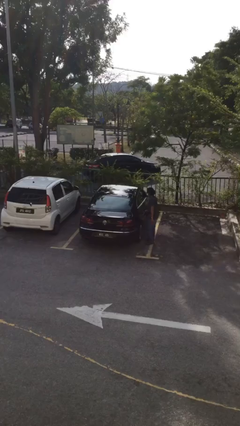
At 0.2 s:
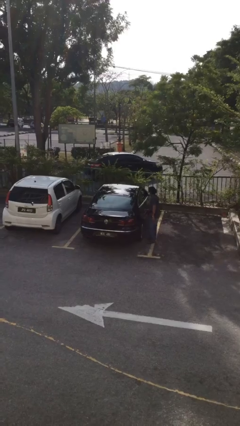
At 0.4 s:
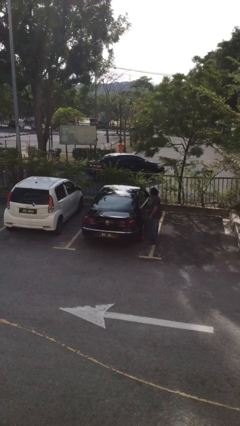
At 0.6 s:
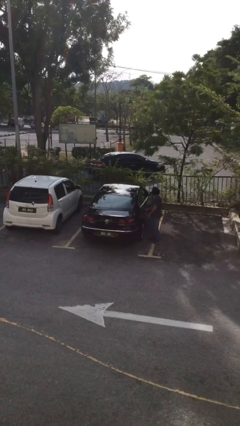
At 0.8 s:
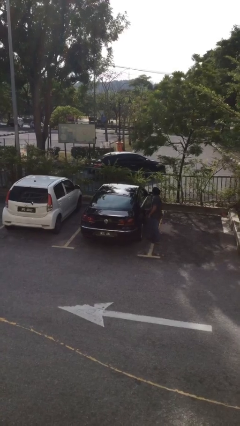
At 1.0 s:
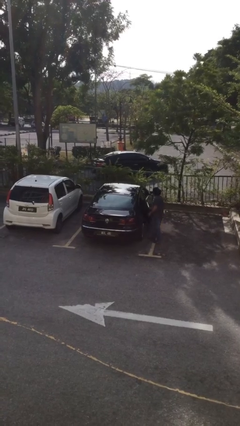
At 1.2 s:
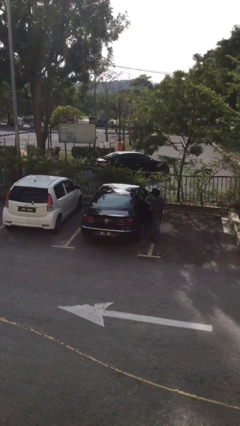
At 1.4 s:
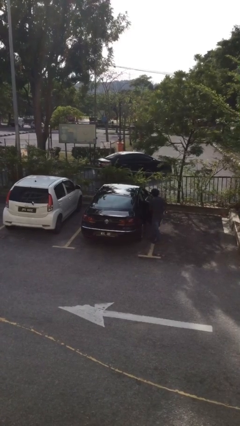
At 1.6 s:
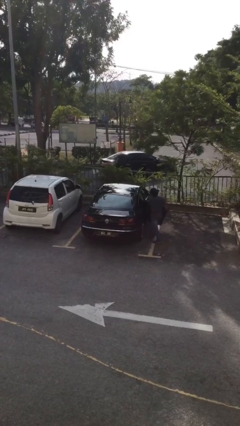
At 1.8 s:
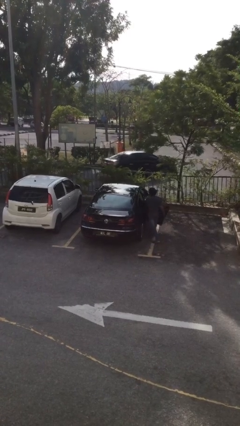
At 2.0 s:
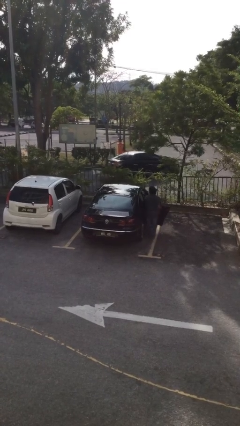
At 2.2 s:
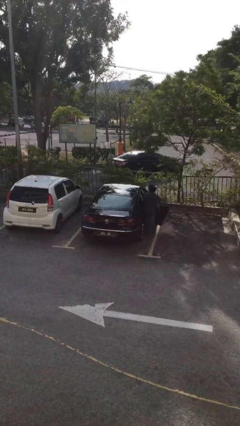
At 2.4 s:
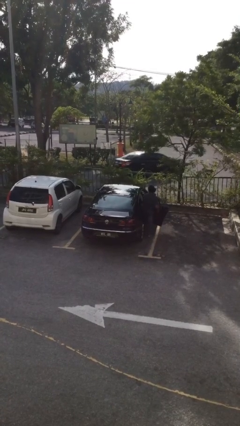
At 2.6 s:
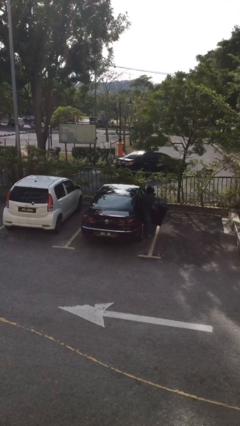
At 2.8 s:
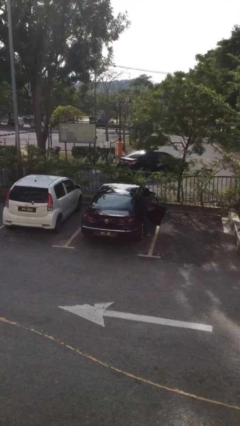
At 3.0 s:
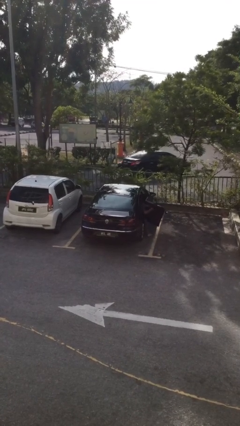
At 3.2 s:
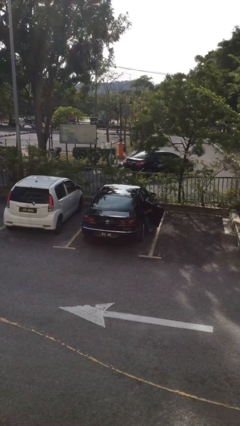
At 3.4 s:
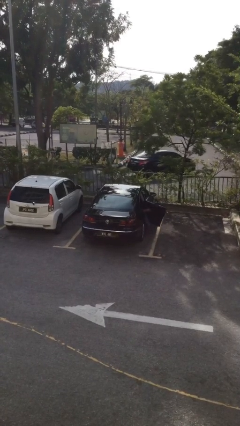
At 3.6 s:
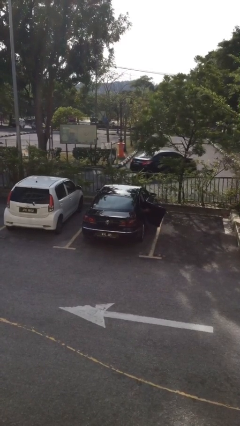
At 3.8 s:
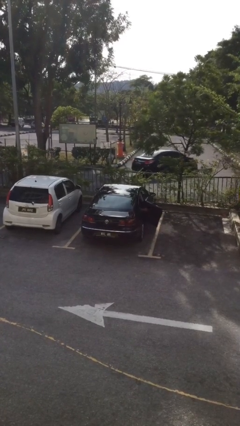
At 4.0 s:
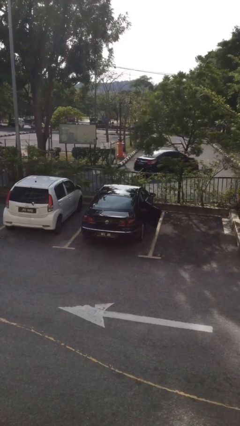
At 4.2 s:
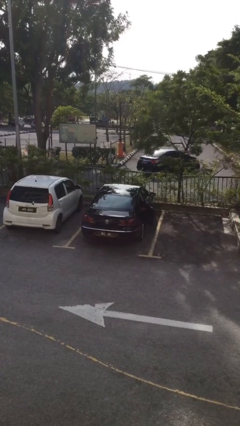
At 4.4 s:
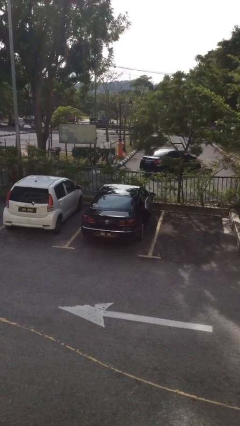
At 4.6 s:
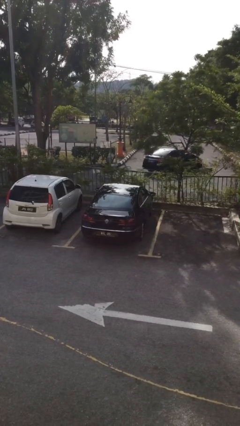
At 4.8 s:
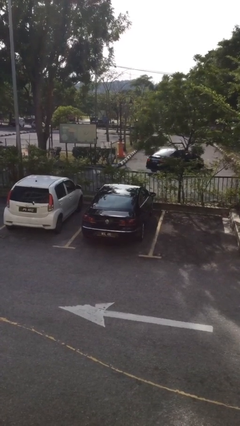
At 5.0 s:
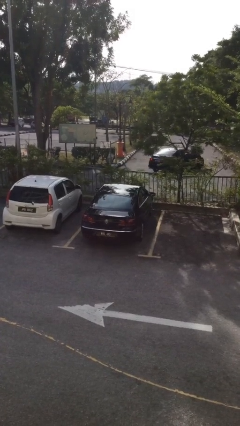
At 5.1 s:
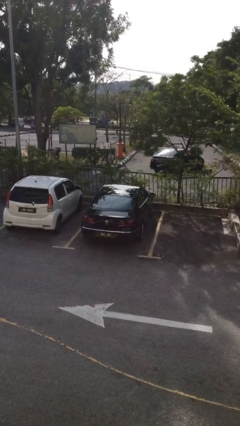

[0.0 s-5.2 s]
car picks up person

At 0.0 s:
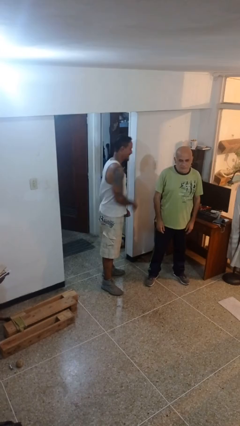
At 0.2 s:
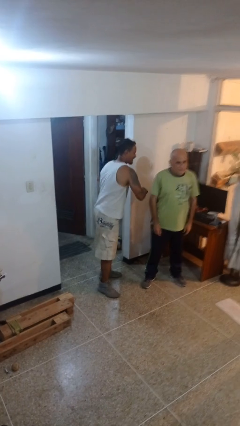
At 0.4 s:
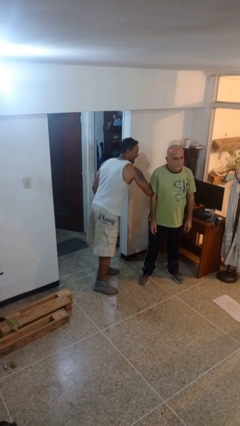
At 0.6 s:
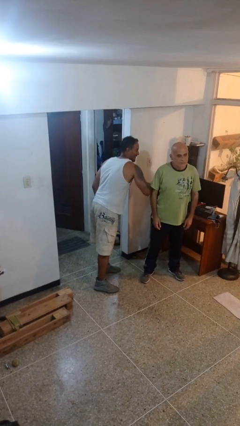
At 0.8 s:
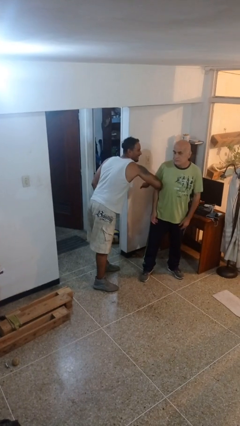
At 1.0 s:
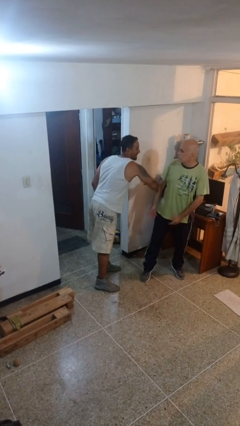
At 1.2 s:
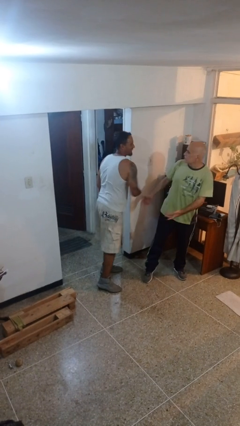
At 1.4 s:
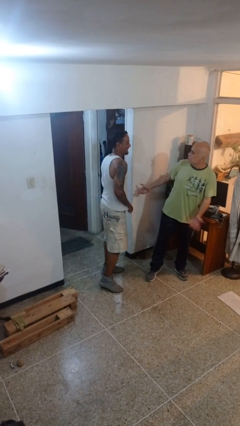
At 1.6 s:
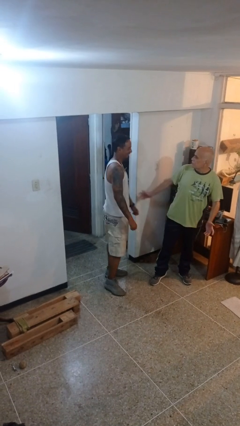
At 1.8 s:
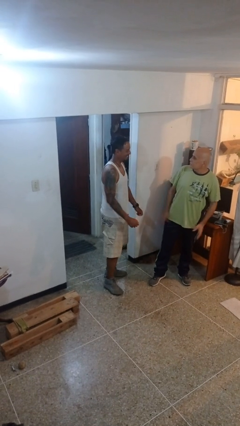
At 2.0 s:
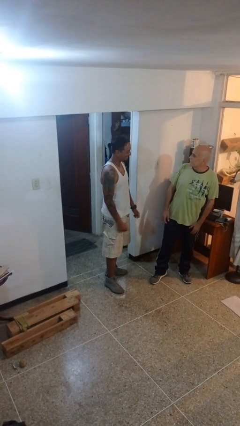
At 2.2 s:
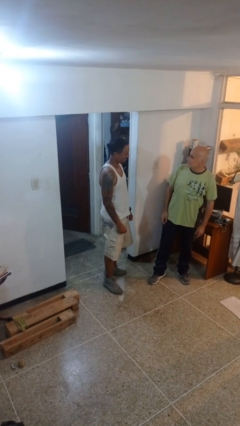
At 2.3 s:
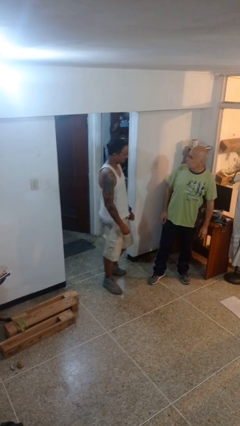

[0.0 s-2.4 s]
person nudges person with elbow

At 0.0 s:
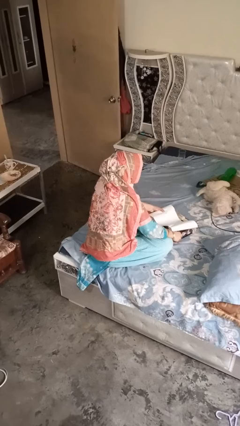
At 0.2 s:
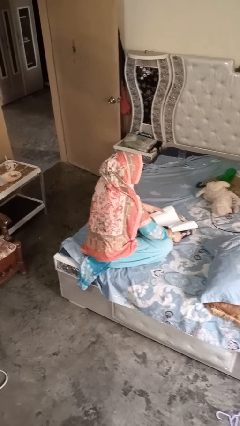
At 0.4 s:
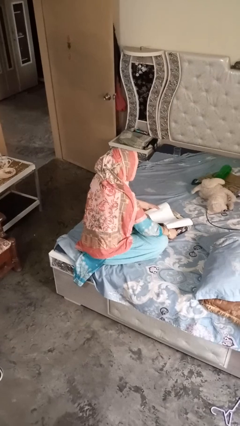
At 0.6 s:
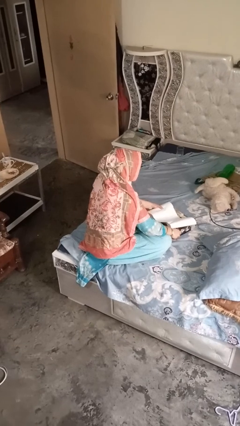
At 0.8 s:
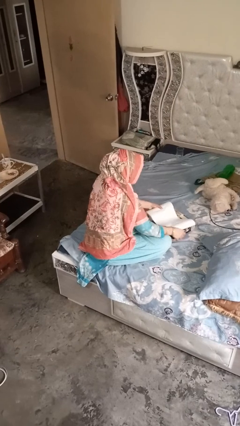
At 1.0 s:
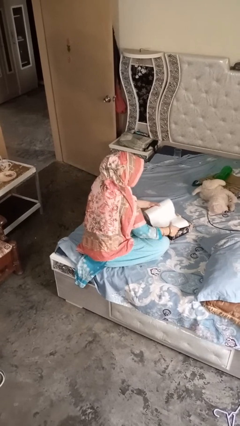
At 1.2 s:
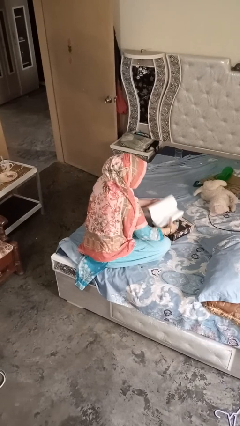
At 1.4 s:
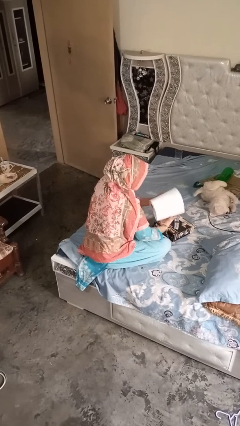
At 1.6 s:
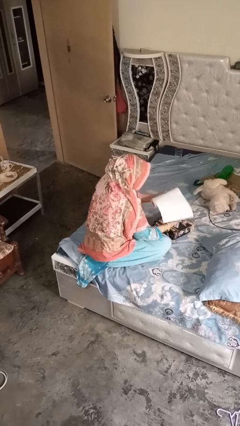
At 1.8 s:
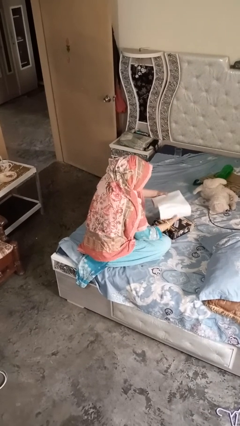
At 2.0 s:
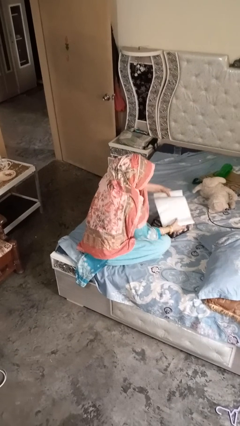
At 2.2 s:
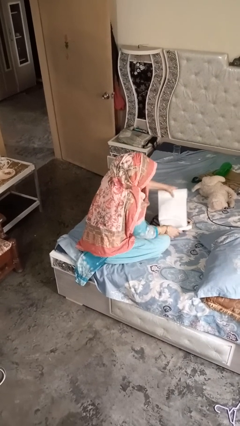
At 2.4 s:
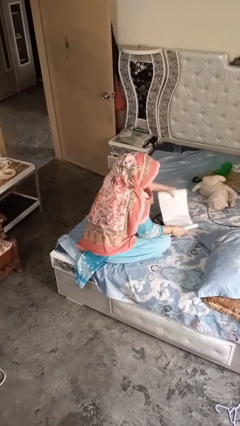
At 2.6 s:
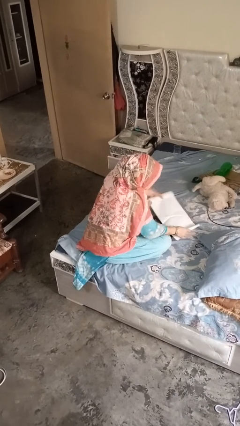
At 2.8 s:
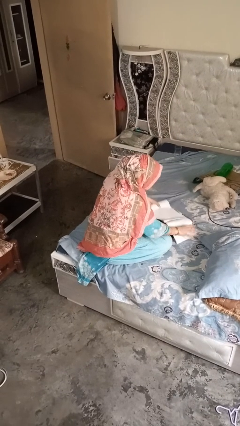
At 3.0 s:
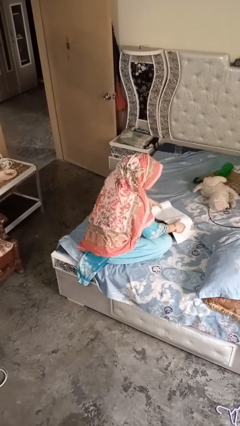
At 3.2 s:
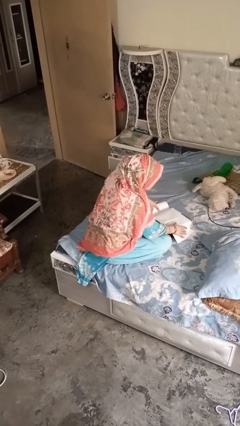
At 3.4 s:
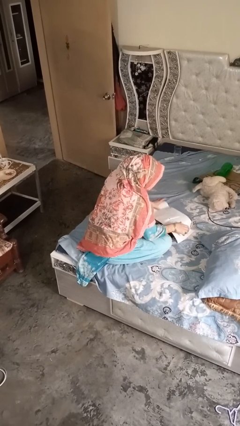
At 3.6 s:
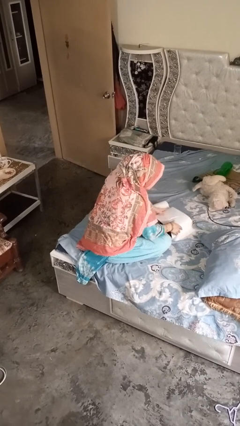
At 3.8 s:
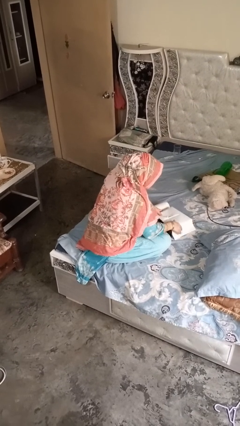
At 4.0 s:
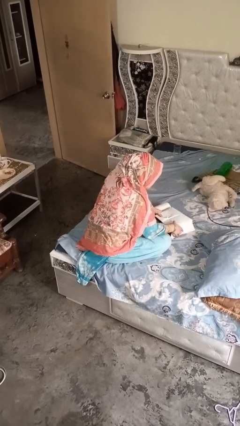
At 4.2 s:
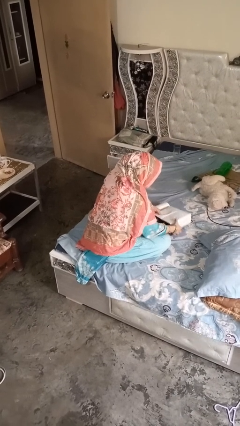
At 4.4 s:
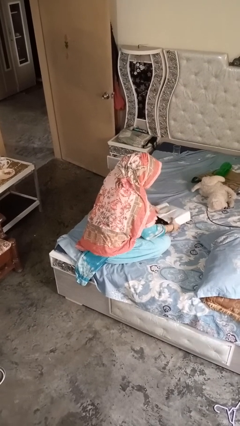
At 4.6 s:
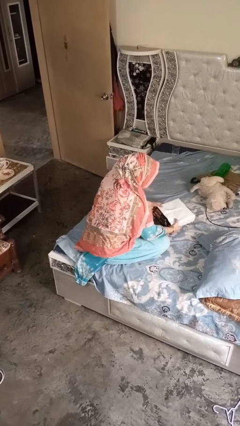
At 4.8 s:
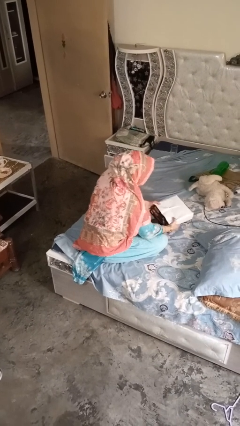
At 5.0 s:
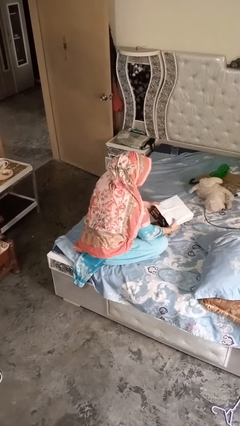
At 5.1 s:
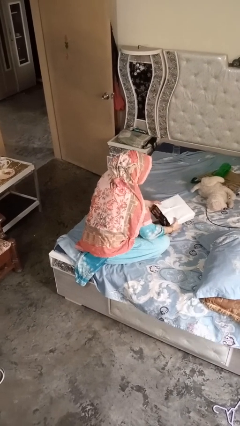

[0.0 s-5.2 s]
person wraps box

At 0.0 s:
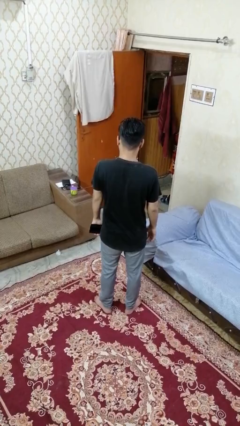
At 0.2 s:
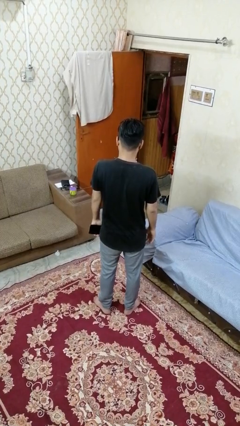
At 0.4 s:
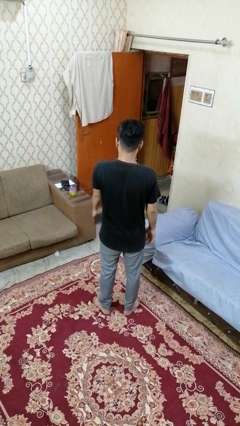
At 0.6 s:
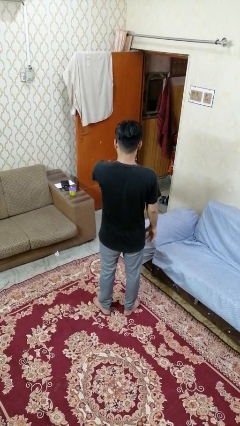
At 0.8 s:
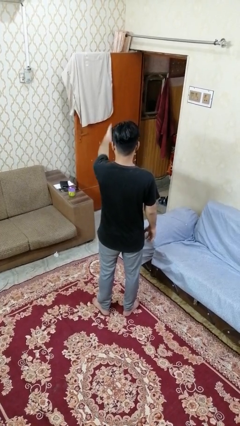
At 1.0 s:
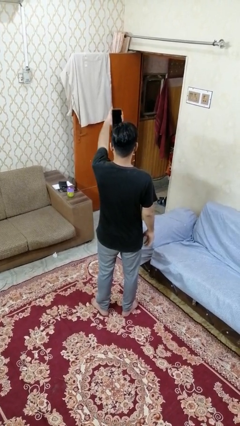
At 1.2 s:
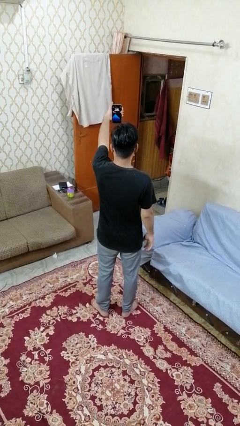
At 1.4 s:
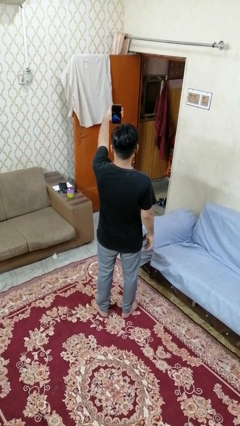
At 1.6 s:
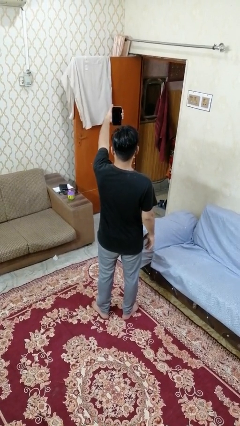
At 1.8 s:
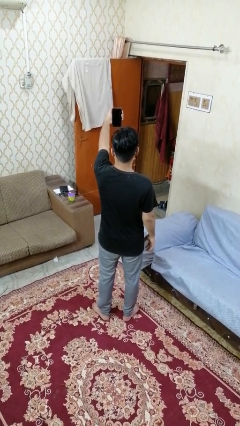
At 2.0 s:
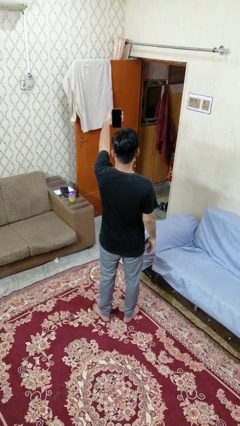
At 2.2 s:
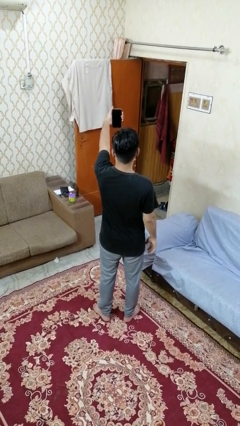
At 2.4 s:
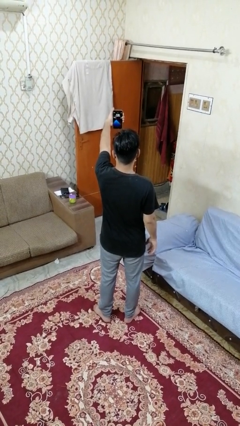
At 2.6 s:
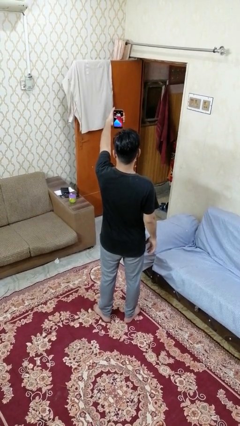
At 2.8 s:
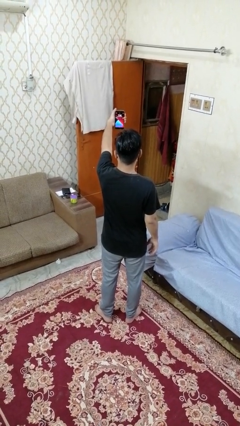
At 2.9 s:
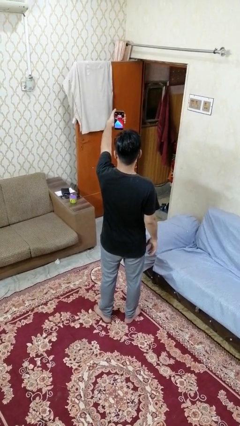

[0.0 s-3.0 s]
person takes selfie

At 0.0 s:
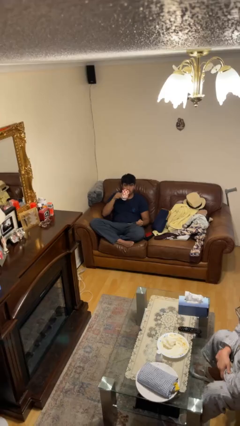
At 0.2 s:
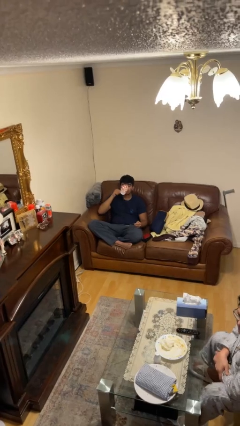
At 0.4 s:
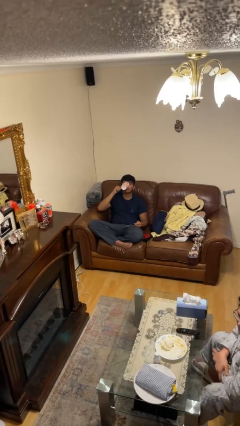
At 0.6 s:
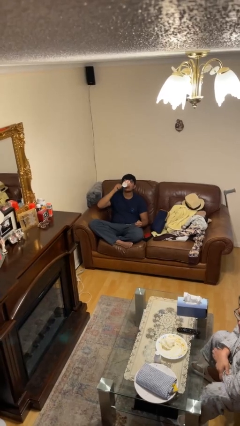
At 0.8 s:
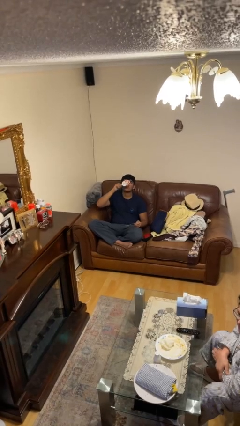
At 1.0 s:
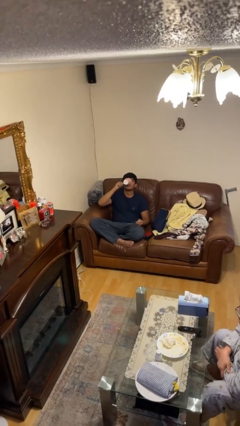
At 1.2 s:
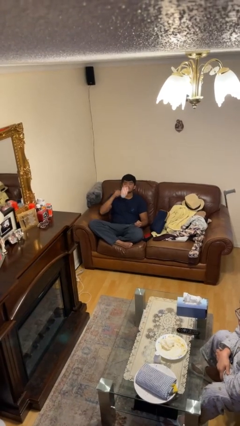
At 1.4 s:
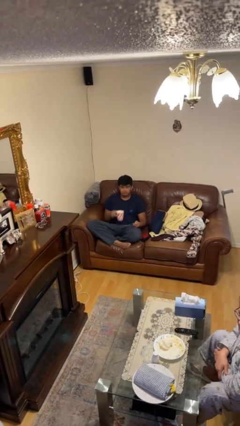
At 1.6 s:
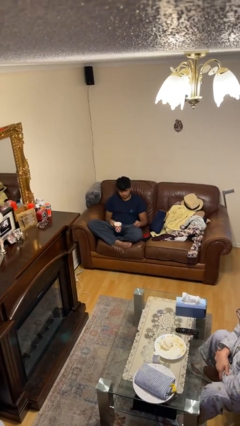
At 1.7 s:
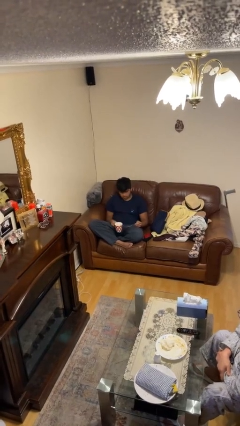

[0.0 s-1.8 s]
person drinks from mug
